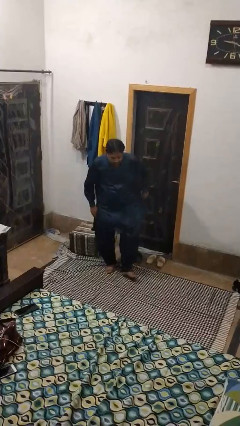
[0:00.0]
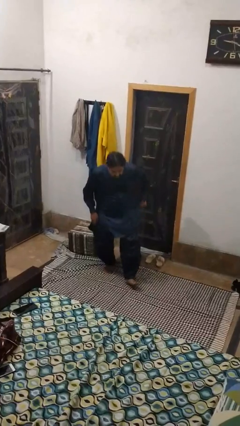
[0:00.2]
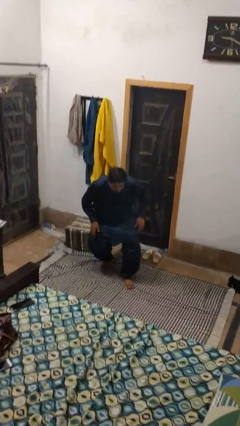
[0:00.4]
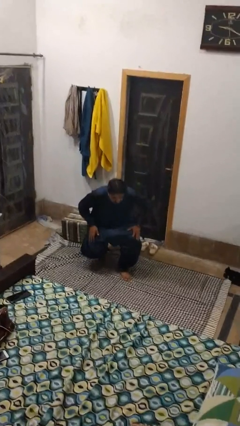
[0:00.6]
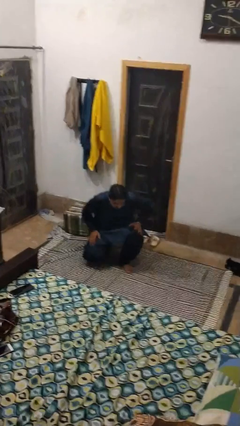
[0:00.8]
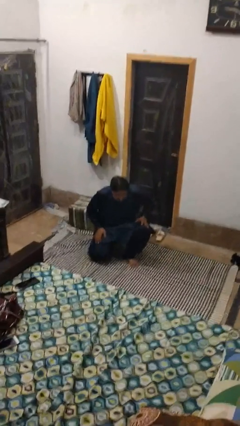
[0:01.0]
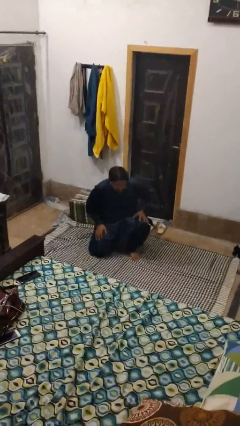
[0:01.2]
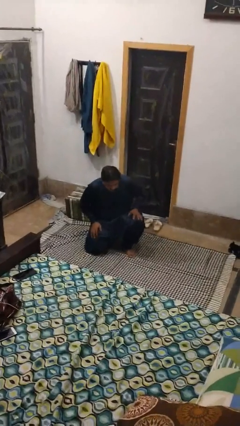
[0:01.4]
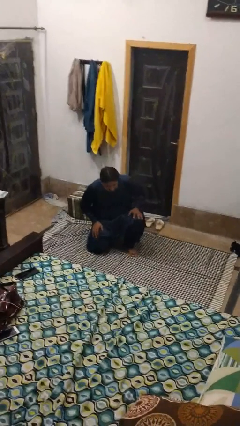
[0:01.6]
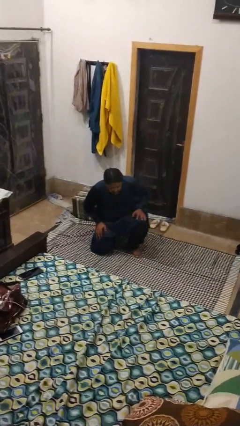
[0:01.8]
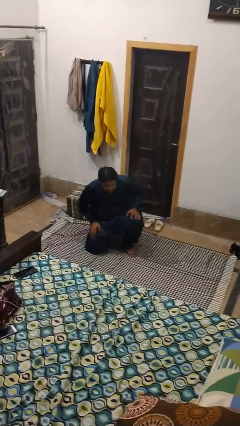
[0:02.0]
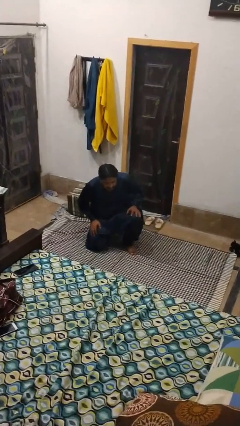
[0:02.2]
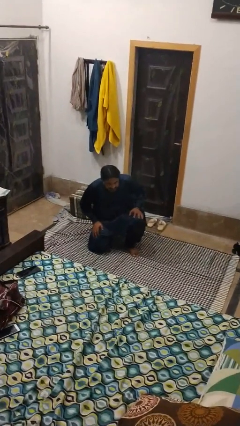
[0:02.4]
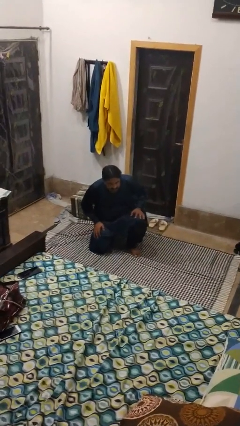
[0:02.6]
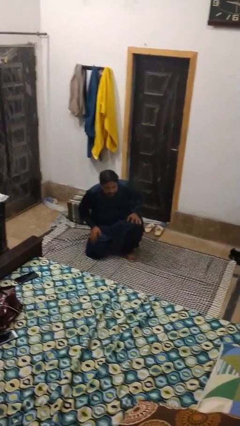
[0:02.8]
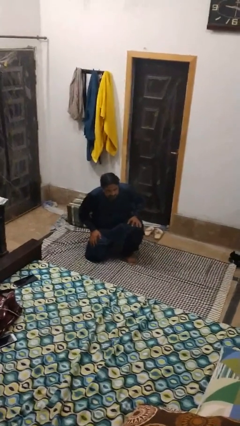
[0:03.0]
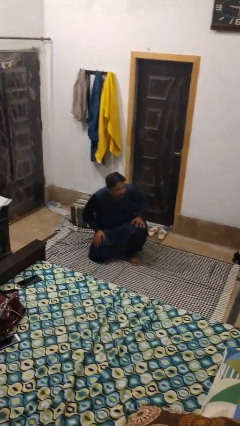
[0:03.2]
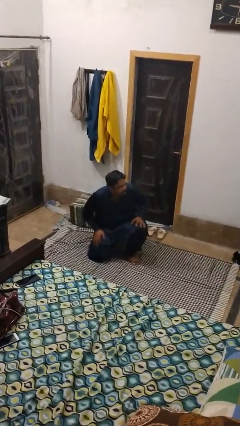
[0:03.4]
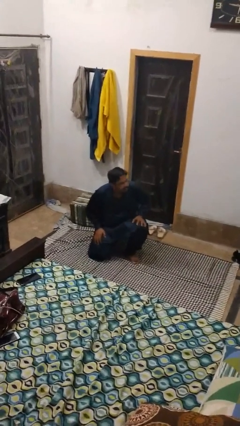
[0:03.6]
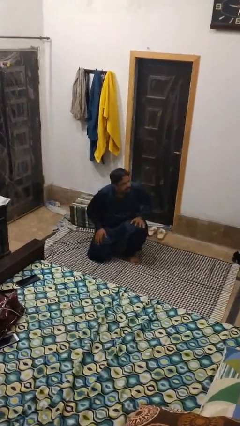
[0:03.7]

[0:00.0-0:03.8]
person kneels

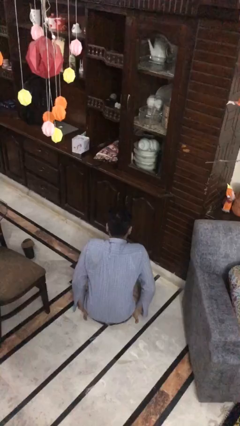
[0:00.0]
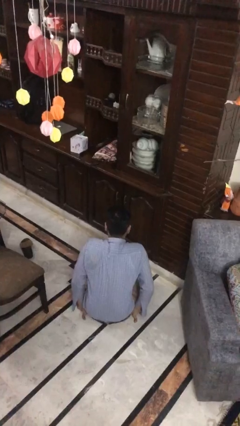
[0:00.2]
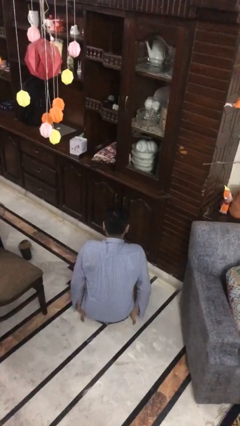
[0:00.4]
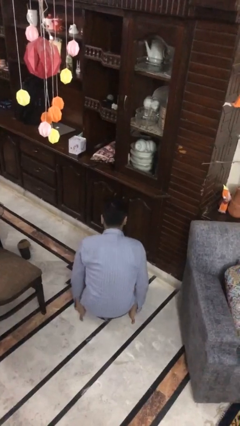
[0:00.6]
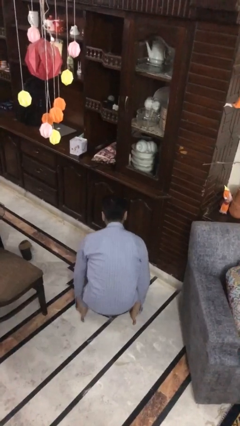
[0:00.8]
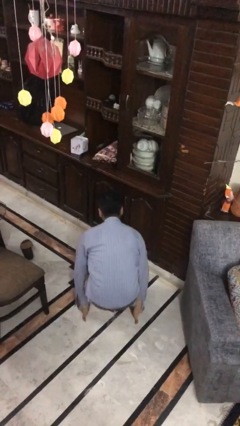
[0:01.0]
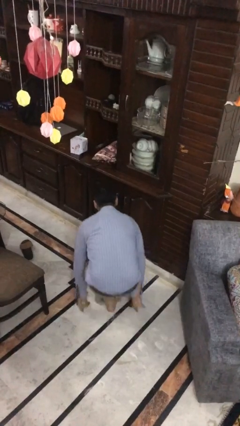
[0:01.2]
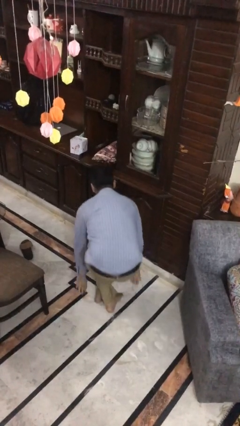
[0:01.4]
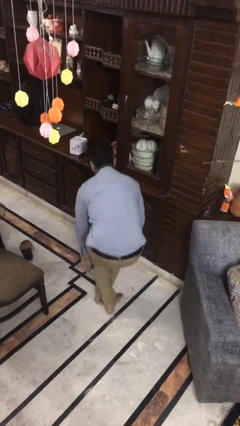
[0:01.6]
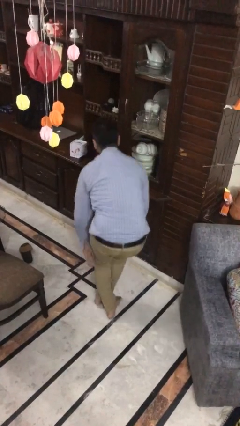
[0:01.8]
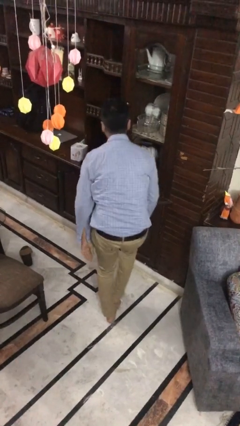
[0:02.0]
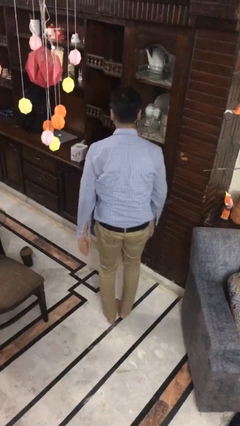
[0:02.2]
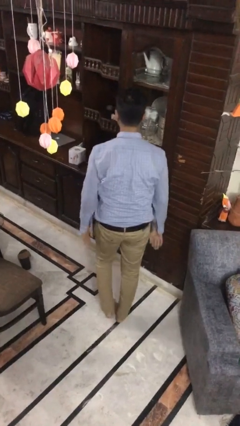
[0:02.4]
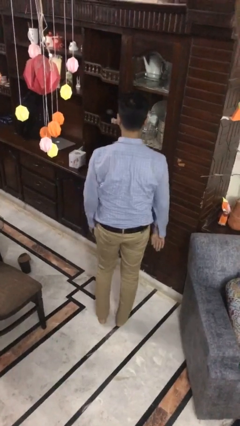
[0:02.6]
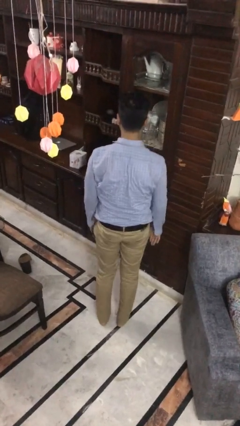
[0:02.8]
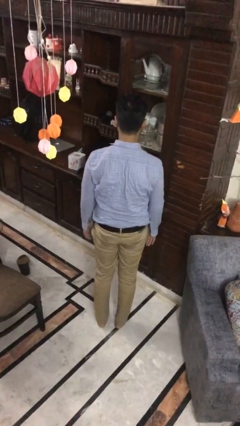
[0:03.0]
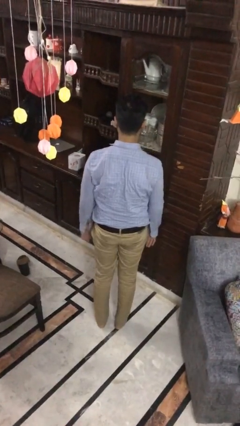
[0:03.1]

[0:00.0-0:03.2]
person stands up from floor

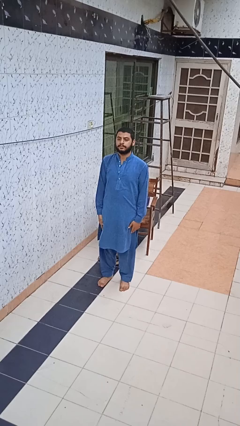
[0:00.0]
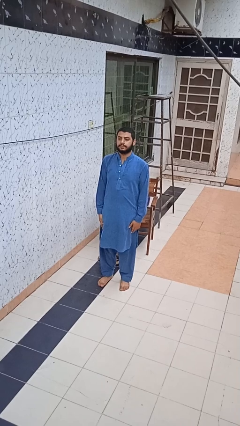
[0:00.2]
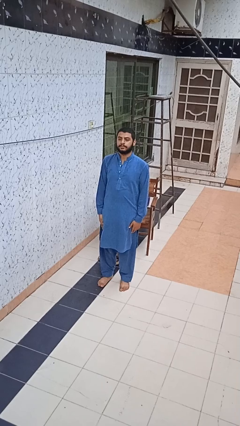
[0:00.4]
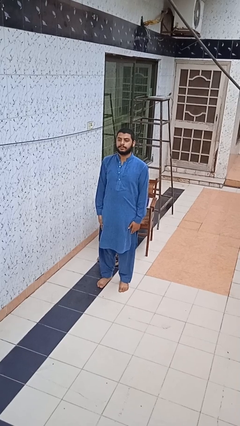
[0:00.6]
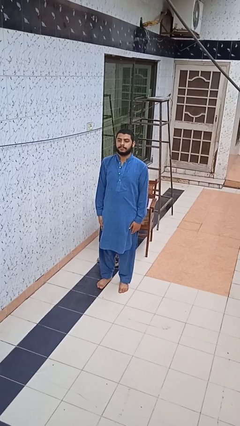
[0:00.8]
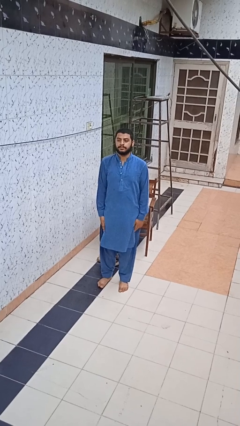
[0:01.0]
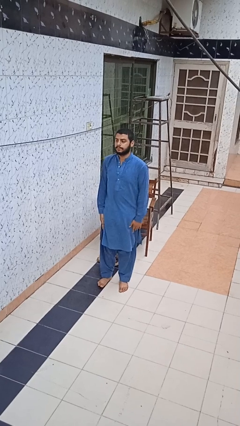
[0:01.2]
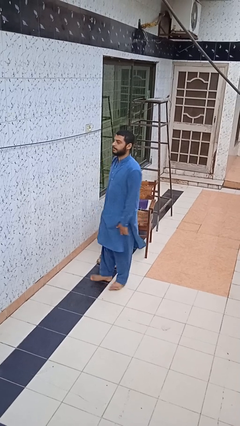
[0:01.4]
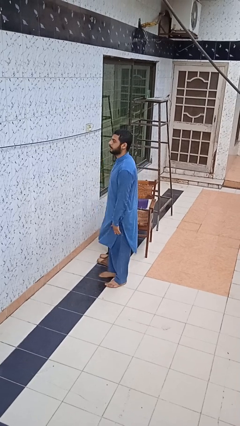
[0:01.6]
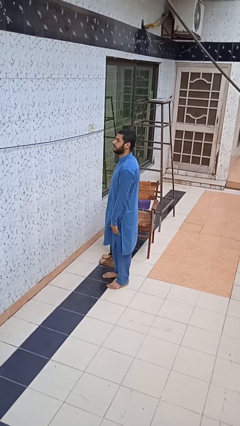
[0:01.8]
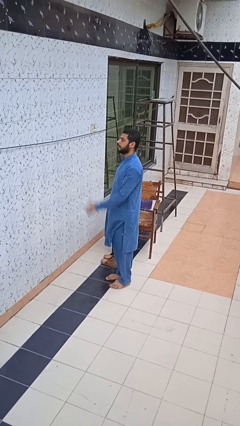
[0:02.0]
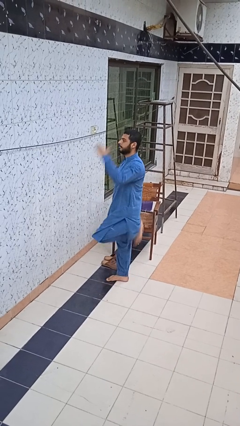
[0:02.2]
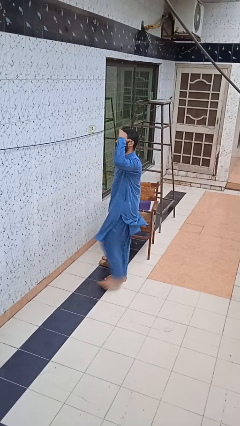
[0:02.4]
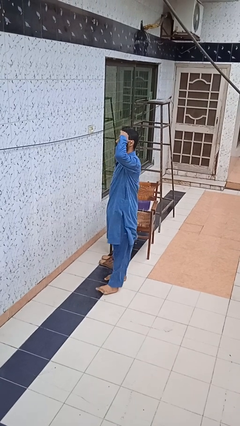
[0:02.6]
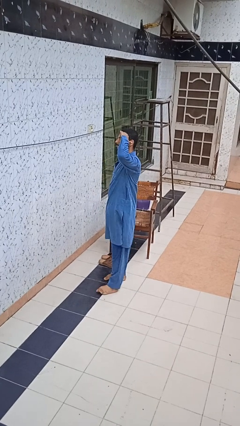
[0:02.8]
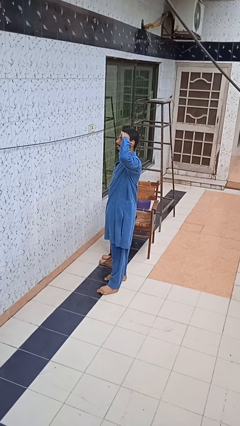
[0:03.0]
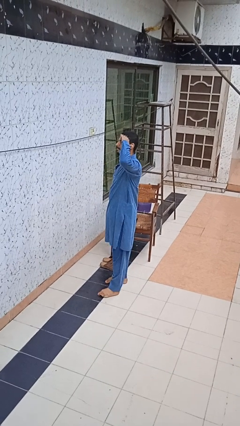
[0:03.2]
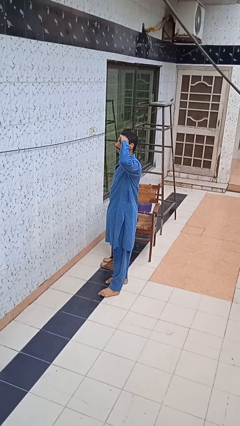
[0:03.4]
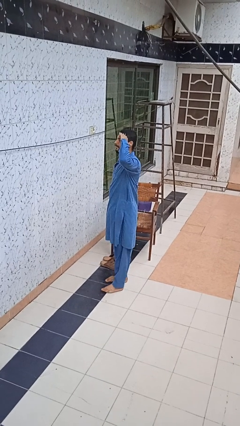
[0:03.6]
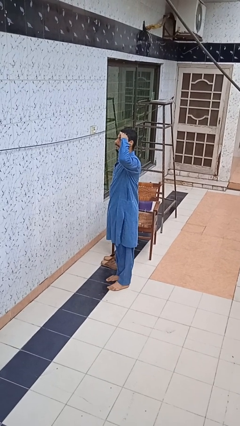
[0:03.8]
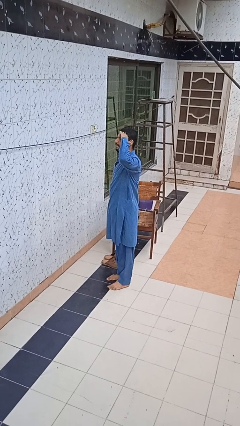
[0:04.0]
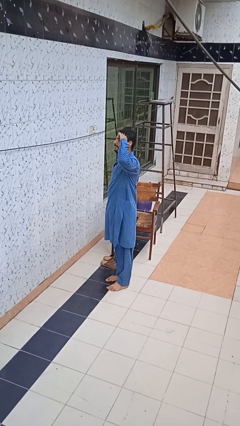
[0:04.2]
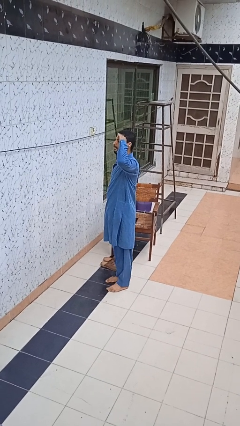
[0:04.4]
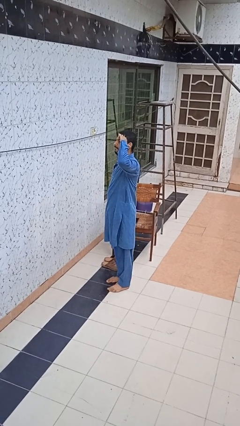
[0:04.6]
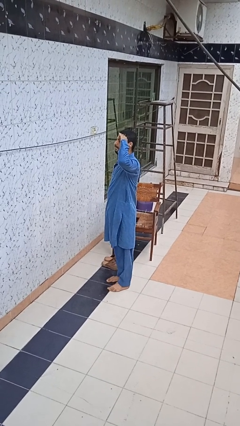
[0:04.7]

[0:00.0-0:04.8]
person salutes

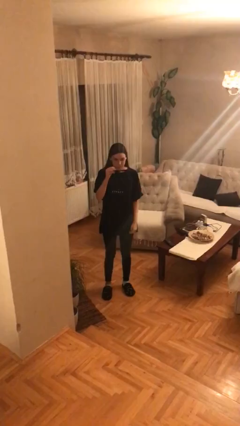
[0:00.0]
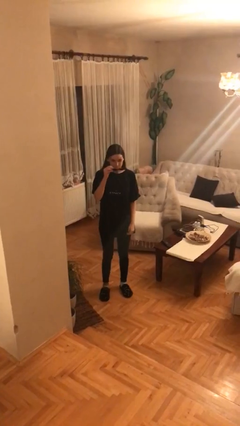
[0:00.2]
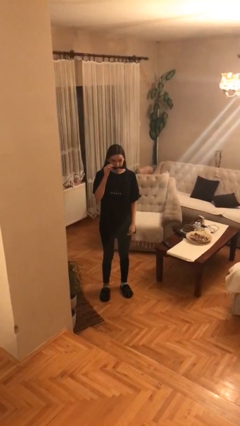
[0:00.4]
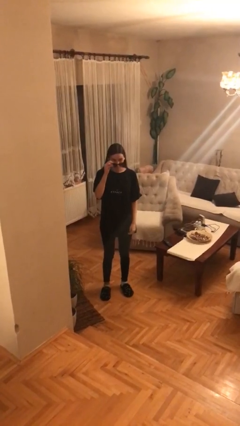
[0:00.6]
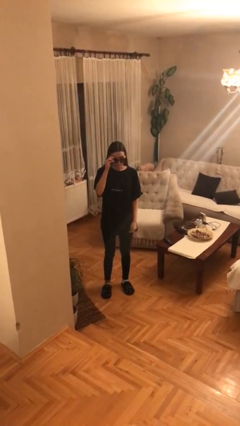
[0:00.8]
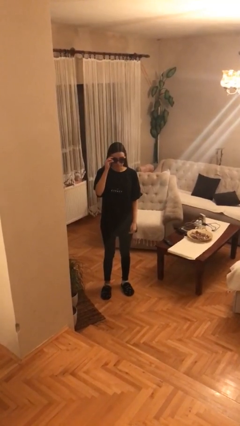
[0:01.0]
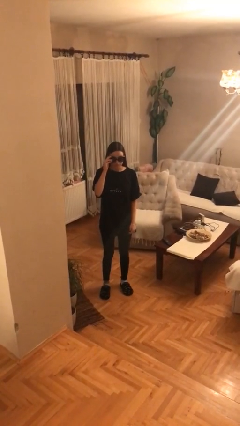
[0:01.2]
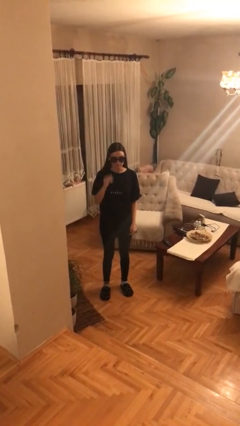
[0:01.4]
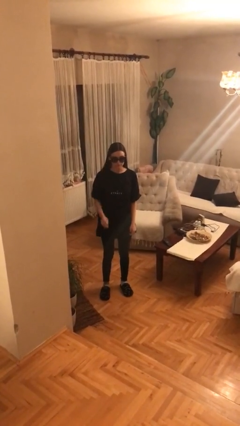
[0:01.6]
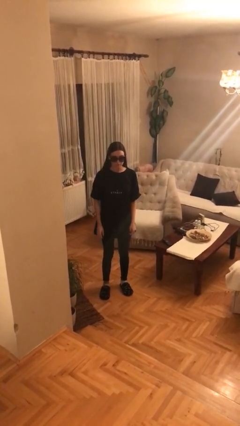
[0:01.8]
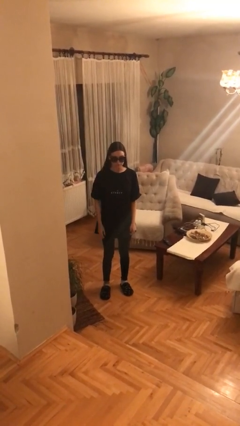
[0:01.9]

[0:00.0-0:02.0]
person puts on sunglasses

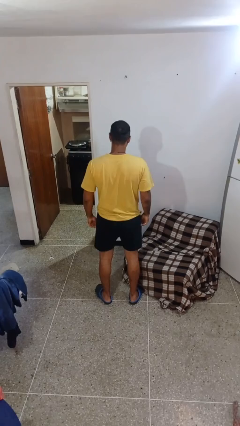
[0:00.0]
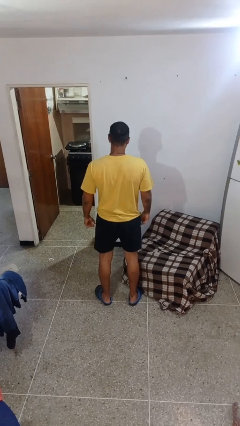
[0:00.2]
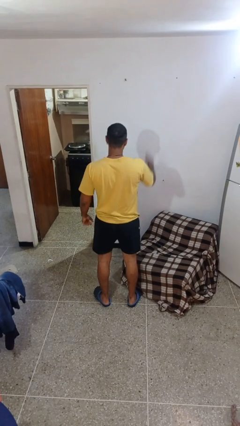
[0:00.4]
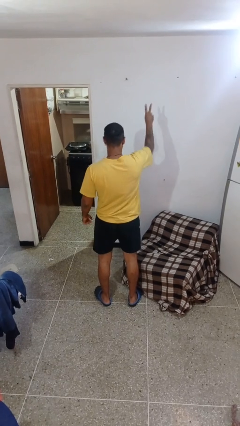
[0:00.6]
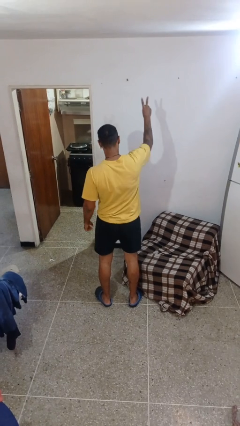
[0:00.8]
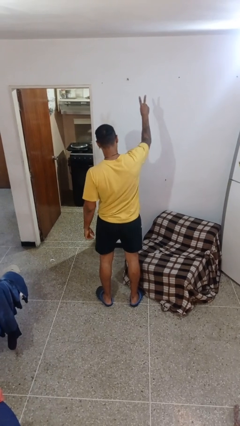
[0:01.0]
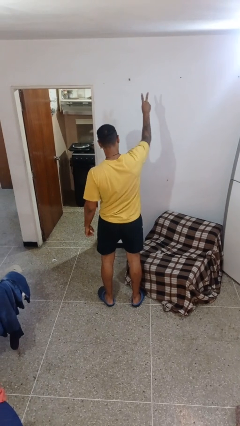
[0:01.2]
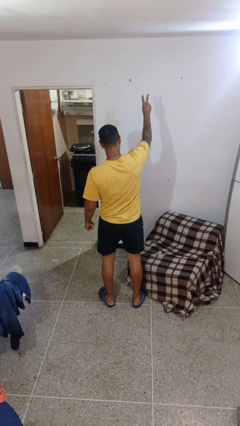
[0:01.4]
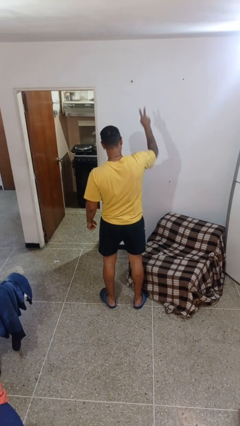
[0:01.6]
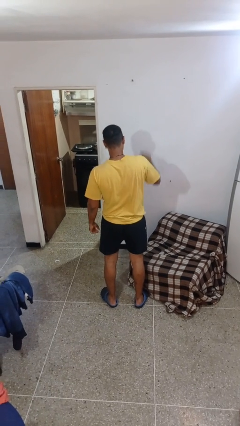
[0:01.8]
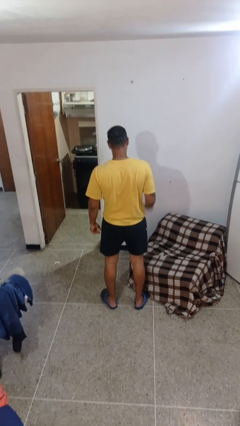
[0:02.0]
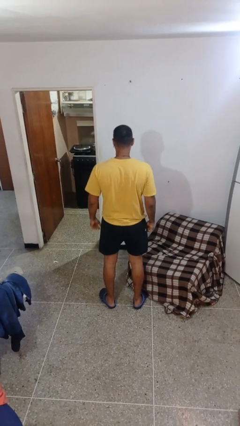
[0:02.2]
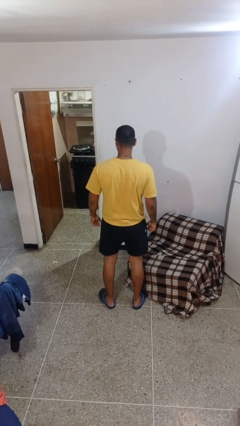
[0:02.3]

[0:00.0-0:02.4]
person gestures peace

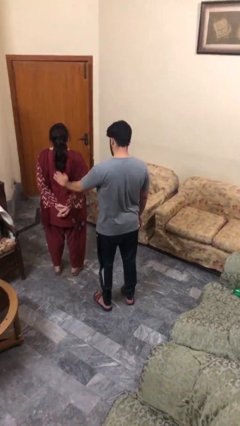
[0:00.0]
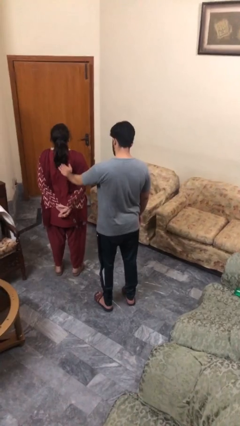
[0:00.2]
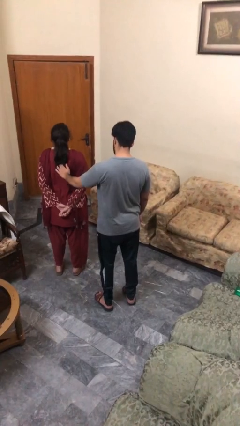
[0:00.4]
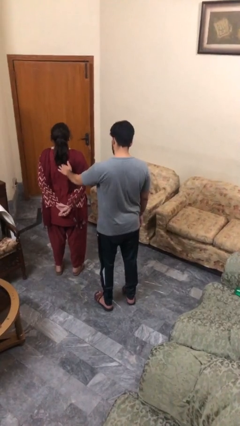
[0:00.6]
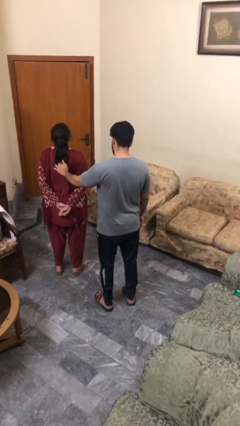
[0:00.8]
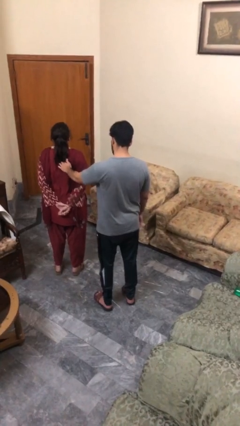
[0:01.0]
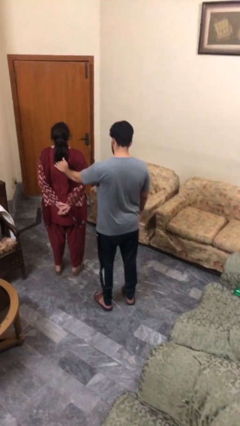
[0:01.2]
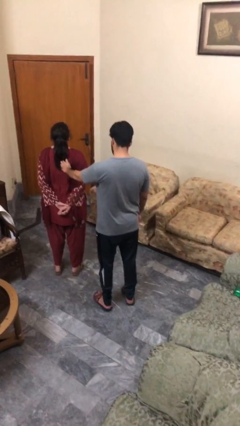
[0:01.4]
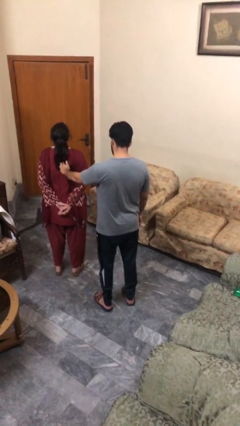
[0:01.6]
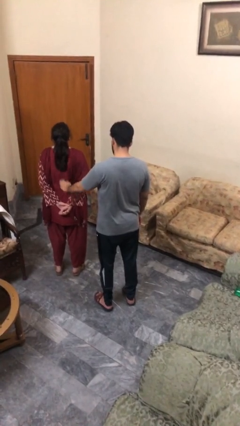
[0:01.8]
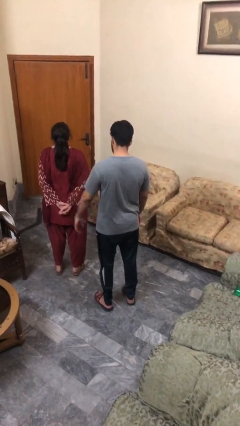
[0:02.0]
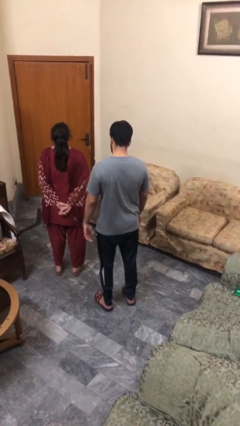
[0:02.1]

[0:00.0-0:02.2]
person touches back of person
